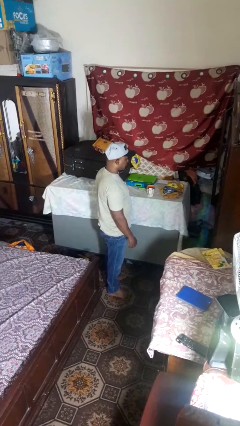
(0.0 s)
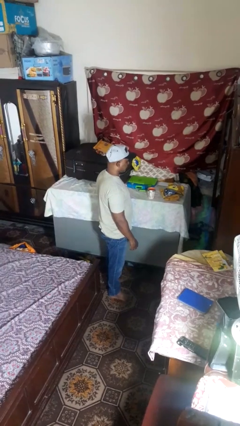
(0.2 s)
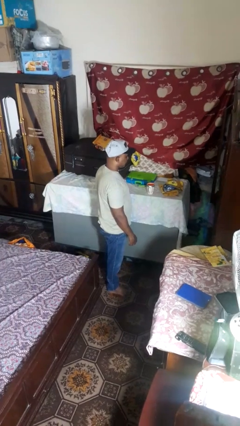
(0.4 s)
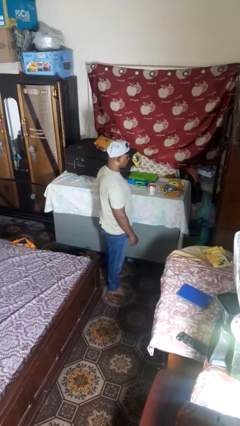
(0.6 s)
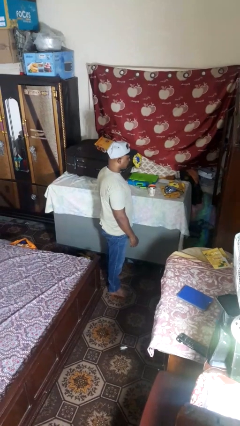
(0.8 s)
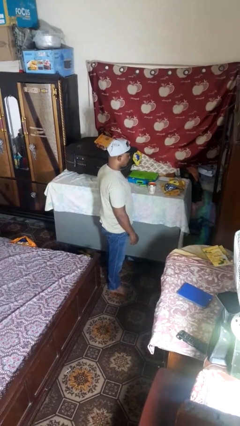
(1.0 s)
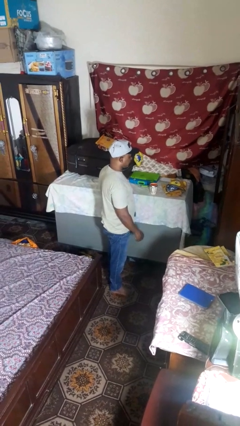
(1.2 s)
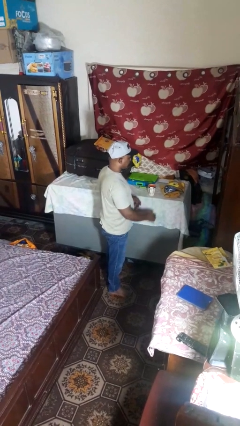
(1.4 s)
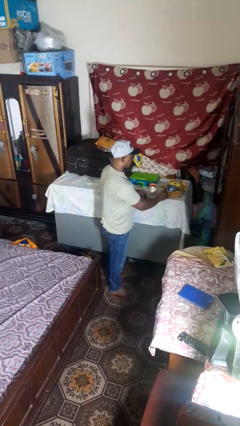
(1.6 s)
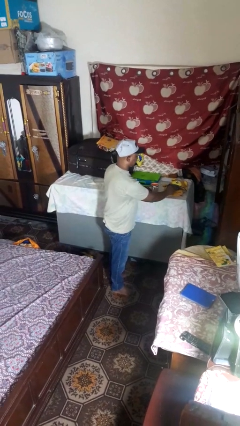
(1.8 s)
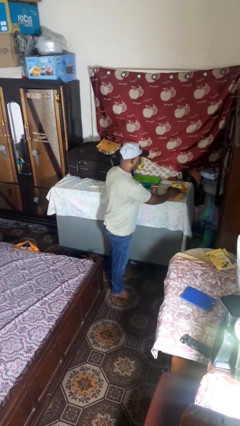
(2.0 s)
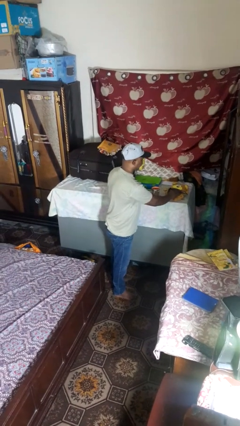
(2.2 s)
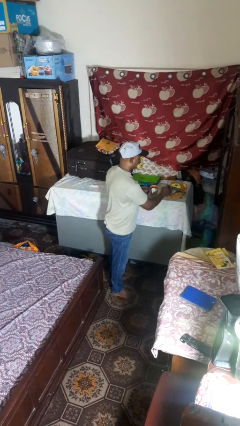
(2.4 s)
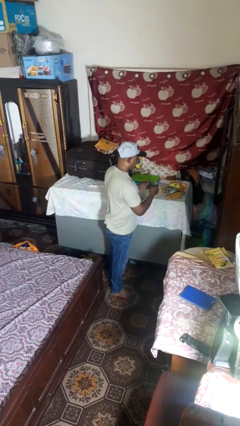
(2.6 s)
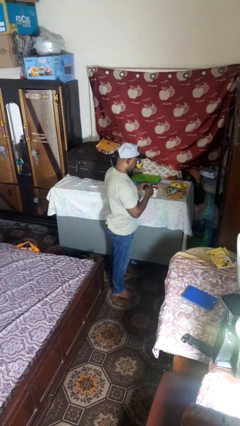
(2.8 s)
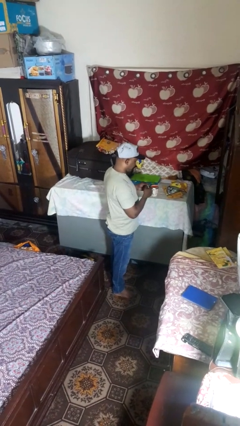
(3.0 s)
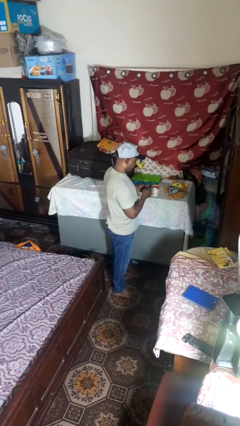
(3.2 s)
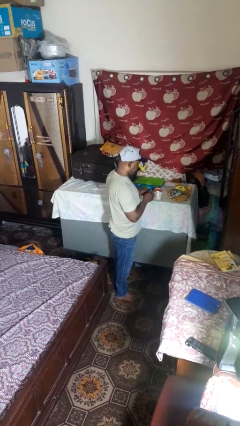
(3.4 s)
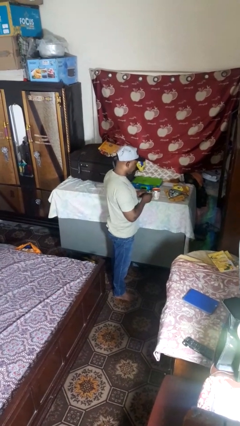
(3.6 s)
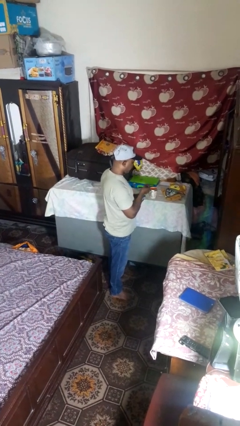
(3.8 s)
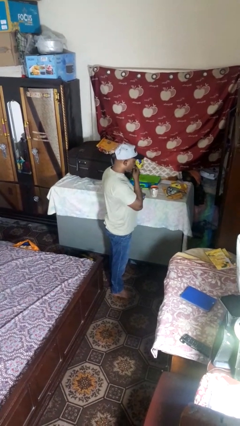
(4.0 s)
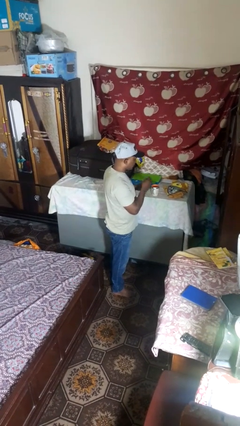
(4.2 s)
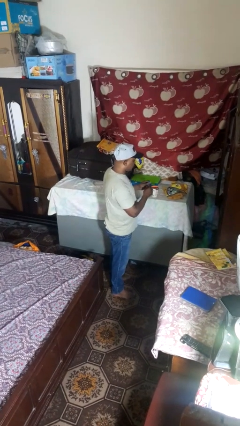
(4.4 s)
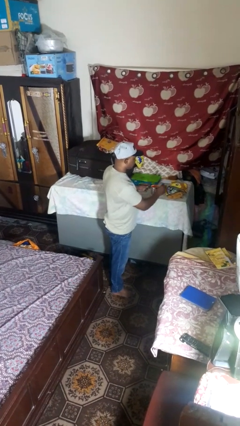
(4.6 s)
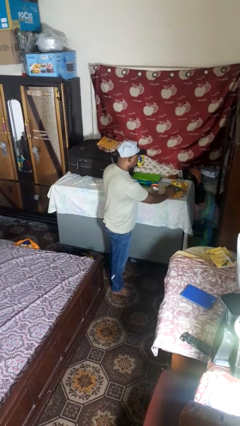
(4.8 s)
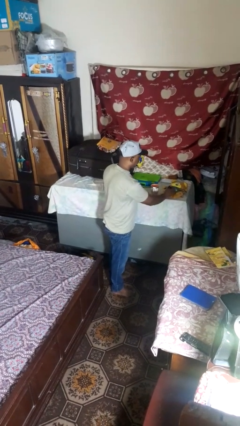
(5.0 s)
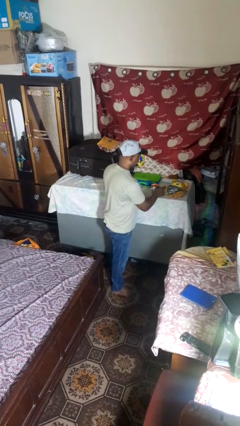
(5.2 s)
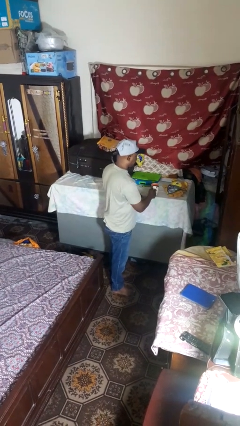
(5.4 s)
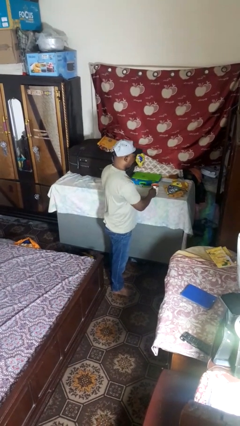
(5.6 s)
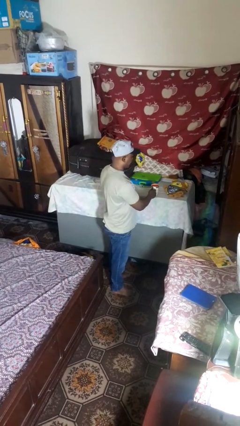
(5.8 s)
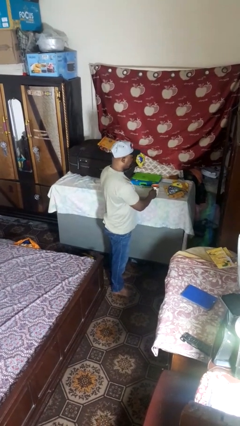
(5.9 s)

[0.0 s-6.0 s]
person takes medicine pills

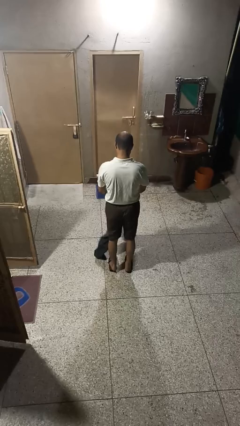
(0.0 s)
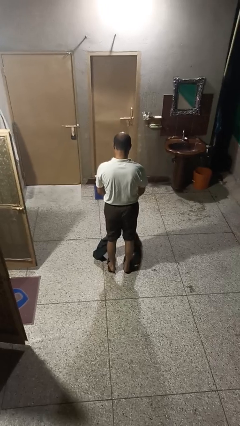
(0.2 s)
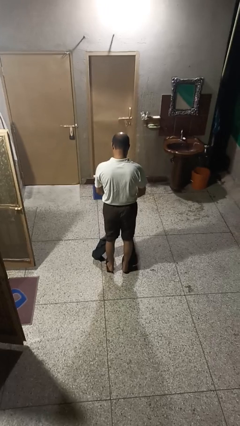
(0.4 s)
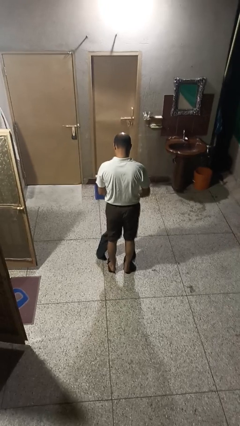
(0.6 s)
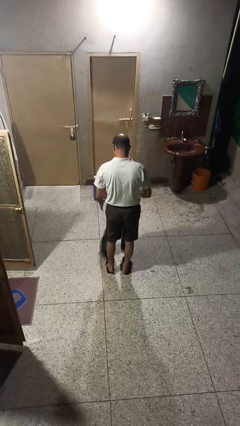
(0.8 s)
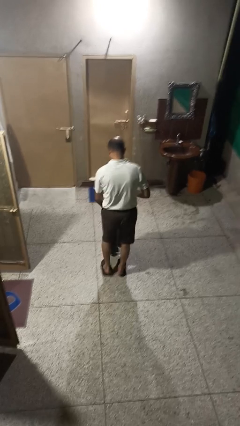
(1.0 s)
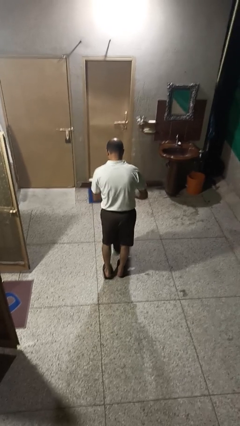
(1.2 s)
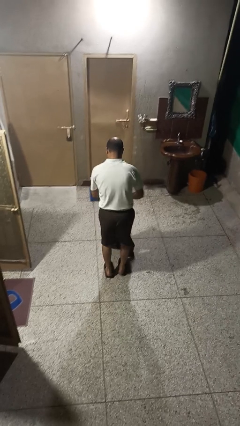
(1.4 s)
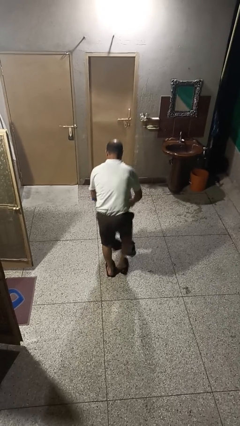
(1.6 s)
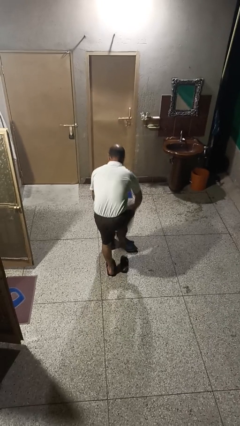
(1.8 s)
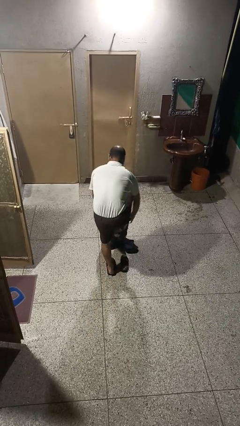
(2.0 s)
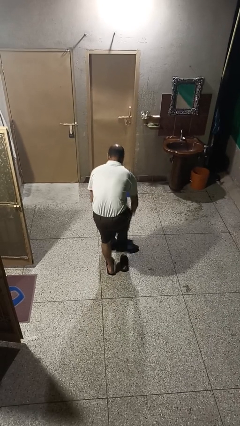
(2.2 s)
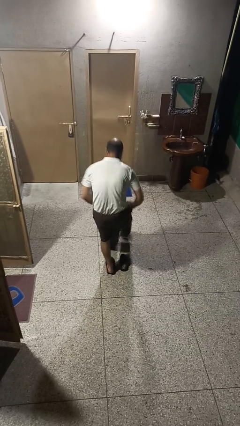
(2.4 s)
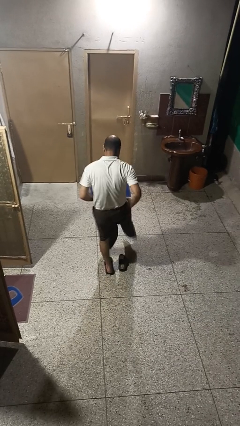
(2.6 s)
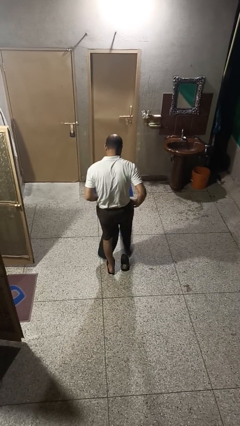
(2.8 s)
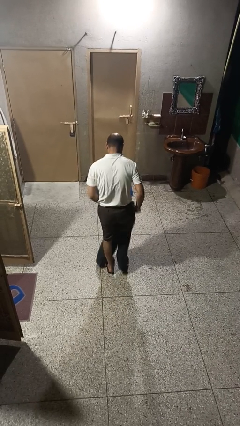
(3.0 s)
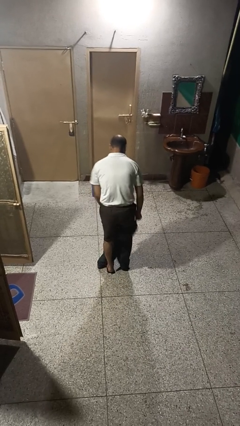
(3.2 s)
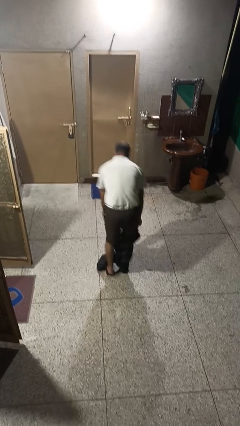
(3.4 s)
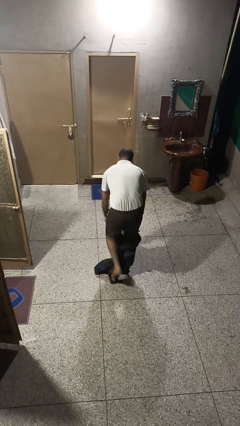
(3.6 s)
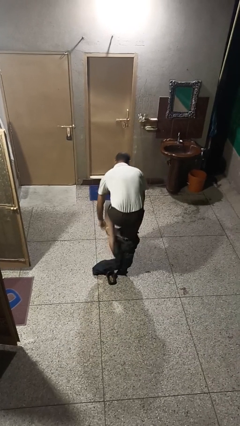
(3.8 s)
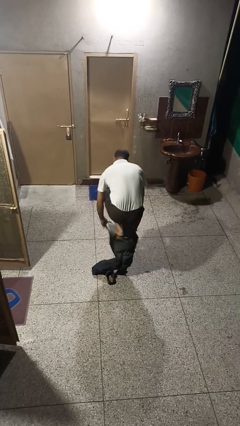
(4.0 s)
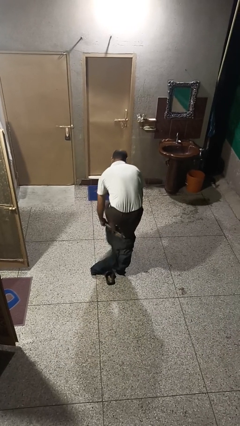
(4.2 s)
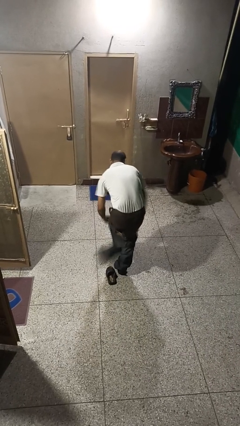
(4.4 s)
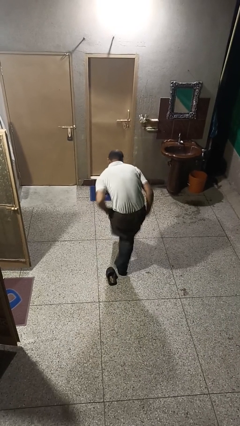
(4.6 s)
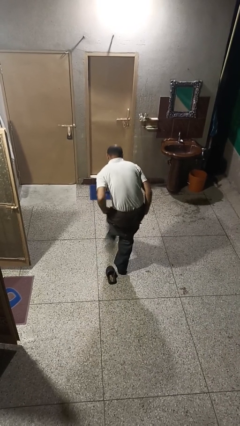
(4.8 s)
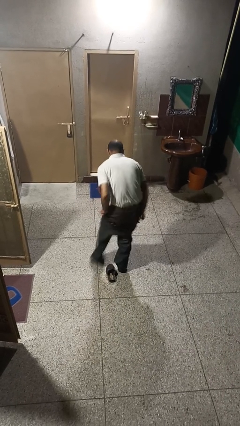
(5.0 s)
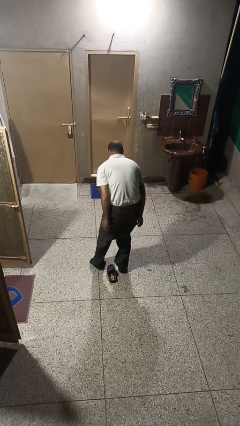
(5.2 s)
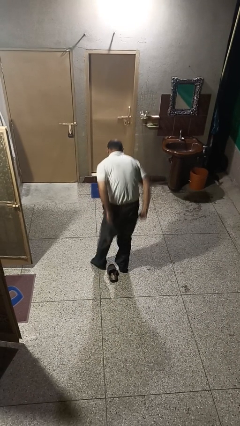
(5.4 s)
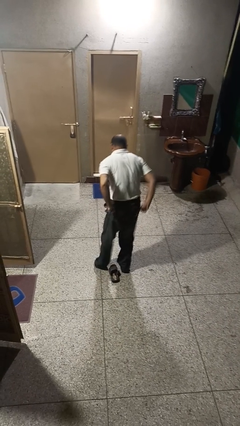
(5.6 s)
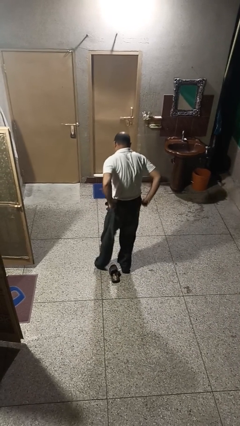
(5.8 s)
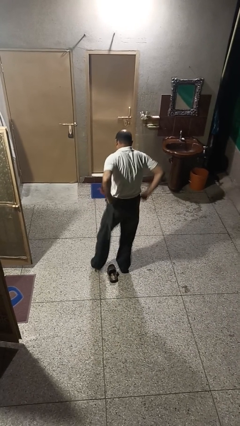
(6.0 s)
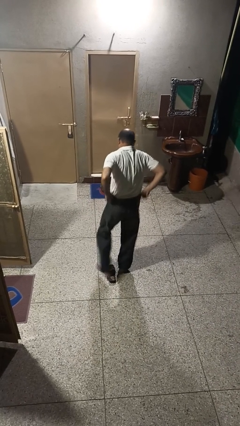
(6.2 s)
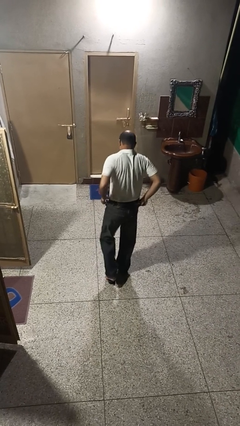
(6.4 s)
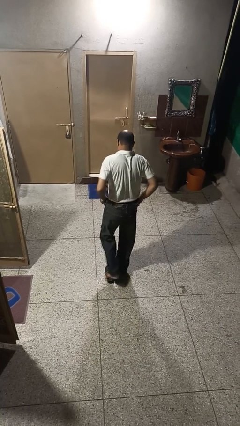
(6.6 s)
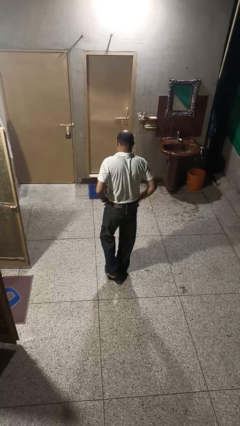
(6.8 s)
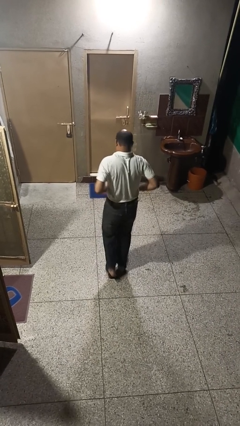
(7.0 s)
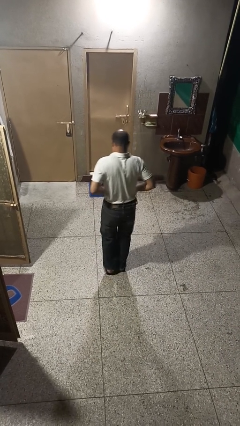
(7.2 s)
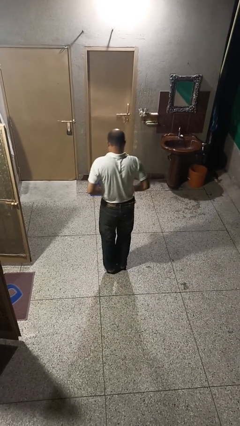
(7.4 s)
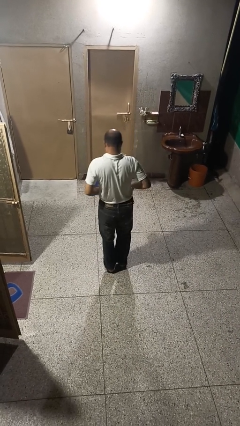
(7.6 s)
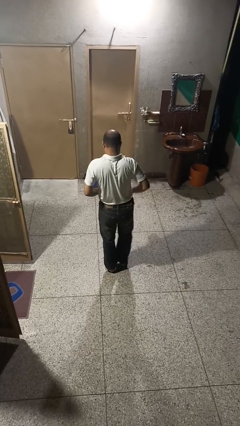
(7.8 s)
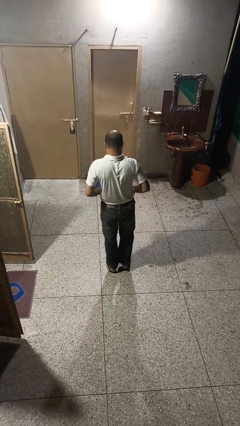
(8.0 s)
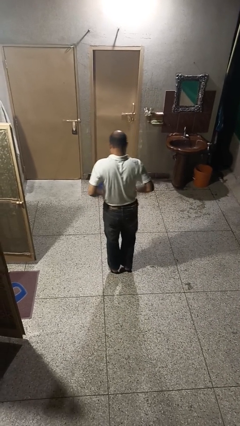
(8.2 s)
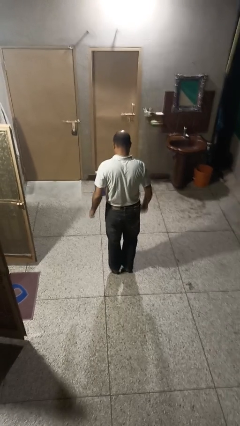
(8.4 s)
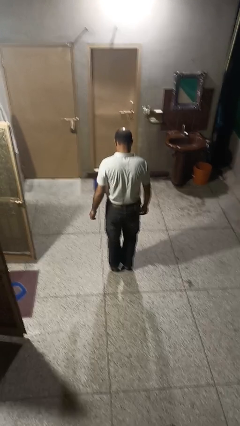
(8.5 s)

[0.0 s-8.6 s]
person puts on pants

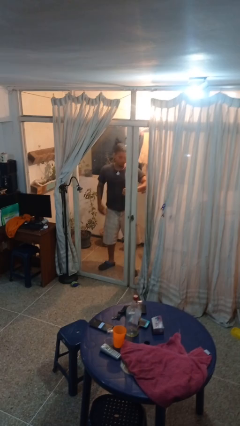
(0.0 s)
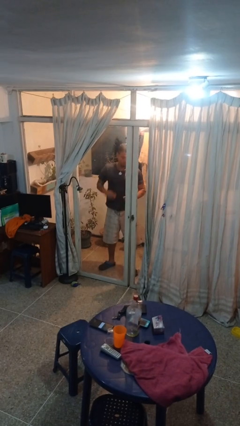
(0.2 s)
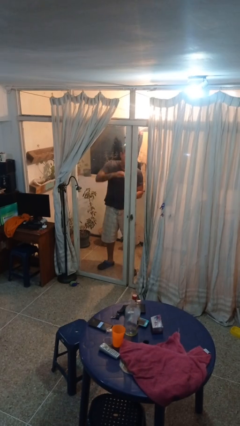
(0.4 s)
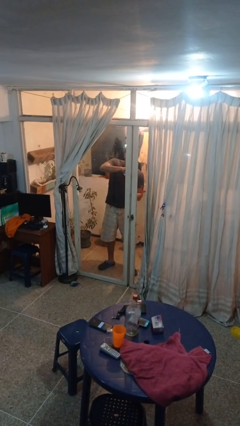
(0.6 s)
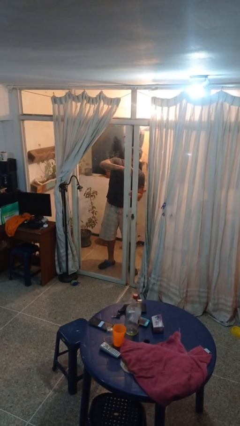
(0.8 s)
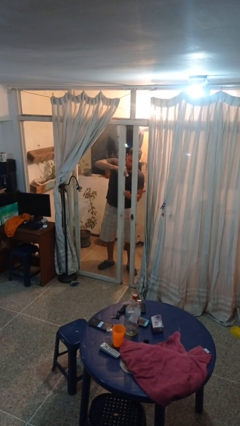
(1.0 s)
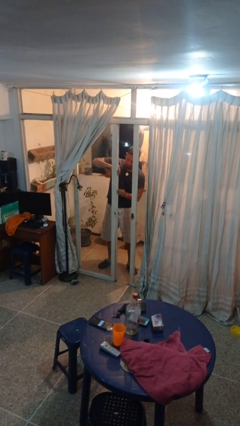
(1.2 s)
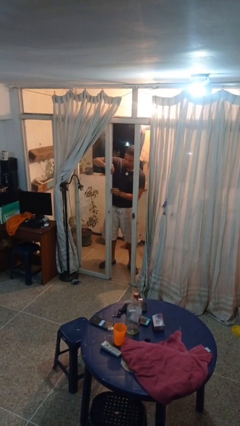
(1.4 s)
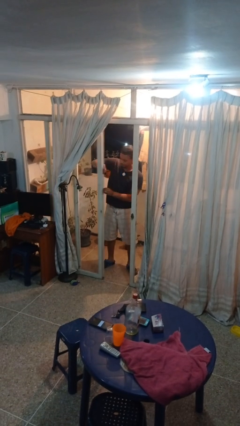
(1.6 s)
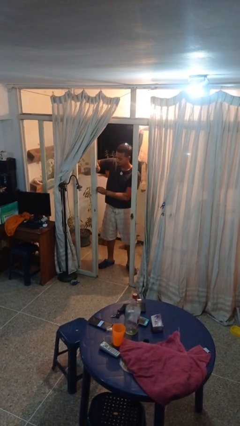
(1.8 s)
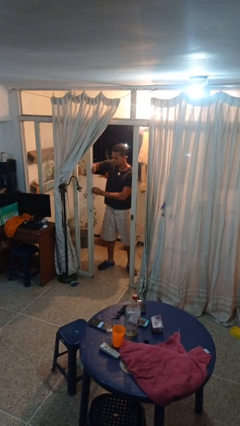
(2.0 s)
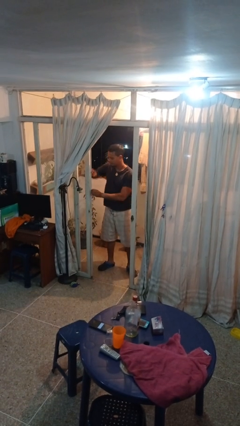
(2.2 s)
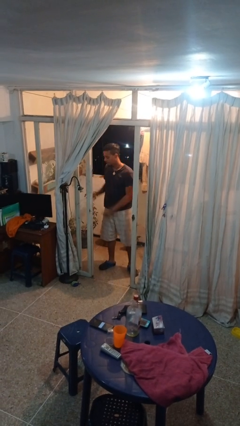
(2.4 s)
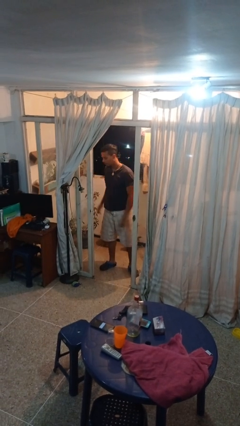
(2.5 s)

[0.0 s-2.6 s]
person opens sliding door

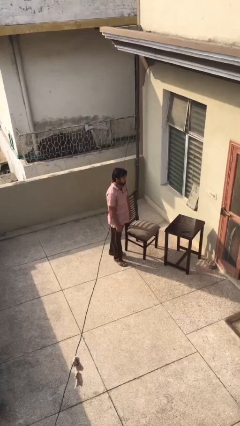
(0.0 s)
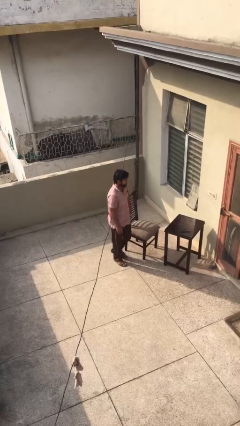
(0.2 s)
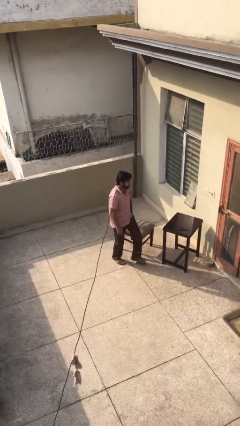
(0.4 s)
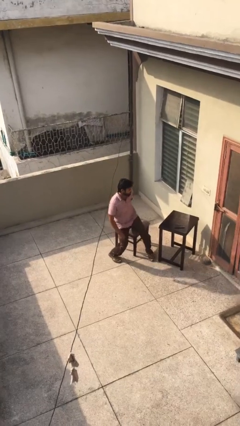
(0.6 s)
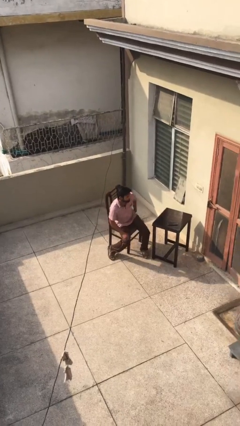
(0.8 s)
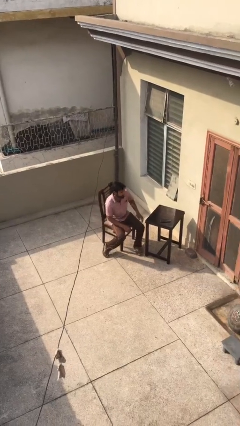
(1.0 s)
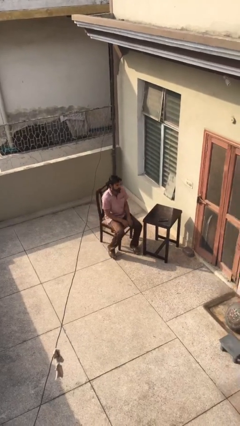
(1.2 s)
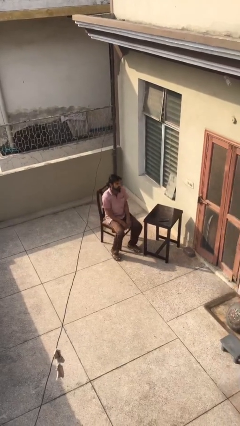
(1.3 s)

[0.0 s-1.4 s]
person sits down
